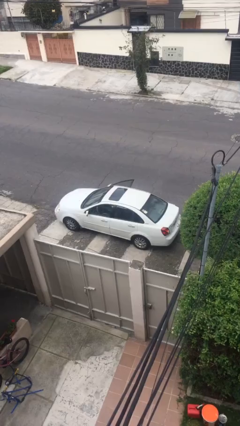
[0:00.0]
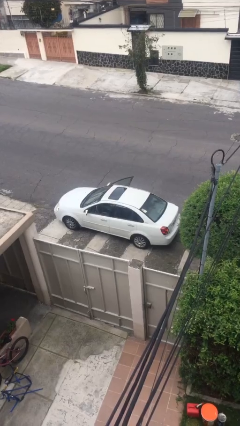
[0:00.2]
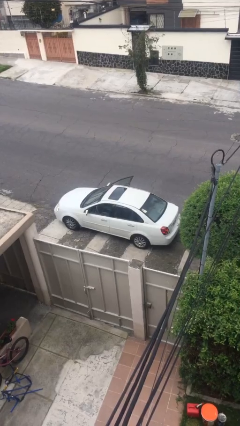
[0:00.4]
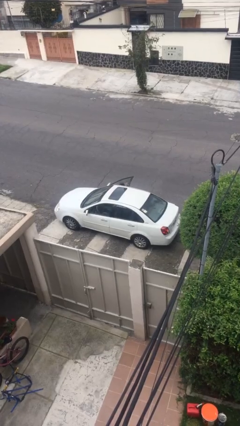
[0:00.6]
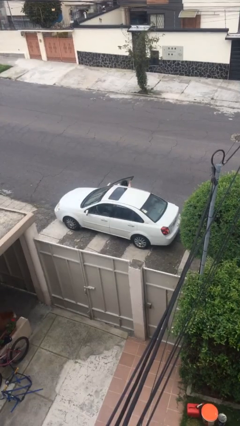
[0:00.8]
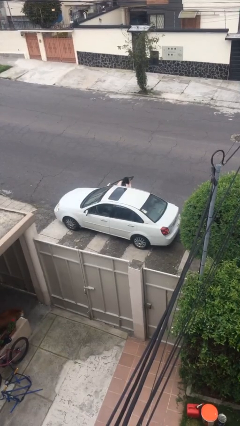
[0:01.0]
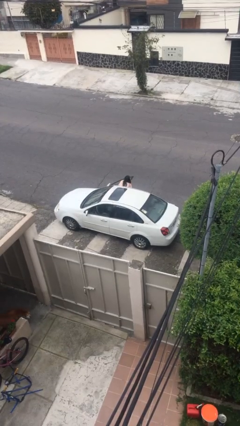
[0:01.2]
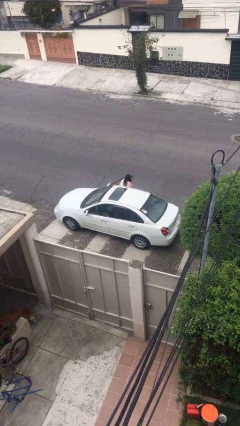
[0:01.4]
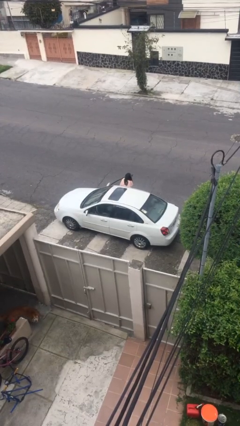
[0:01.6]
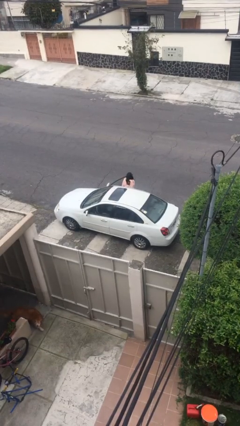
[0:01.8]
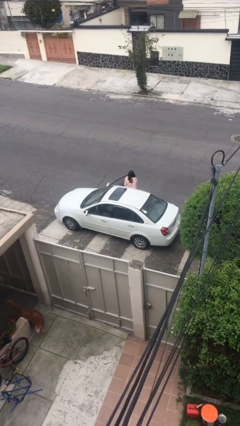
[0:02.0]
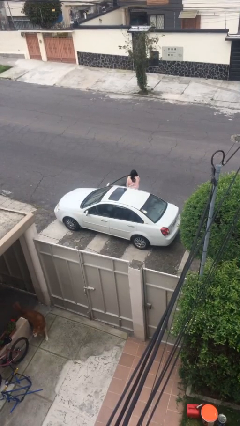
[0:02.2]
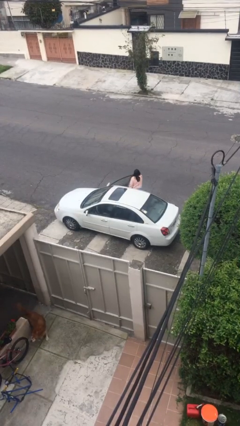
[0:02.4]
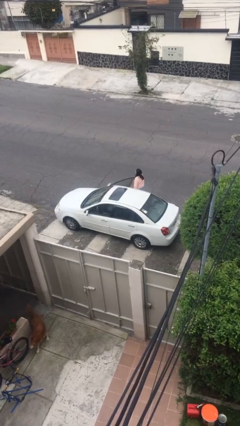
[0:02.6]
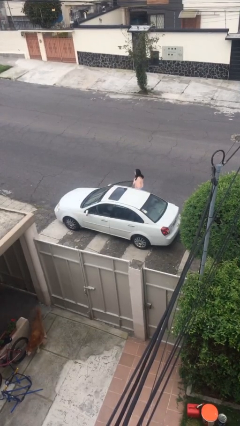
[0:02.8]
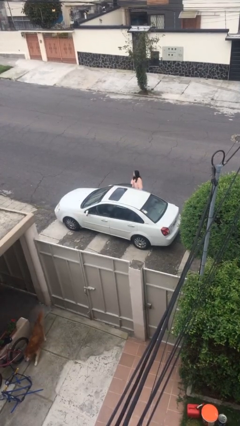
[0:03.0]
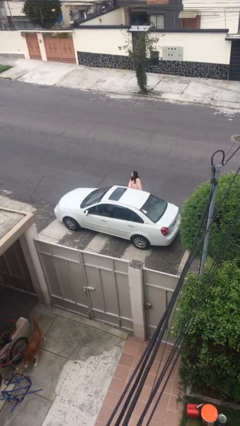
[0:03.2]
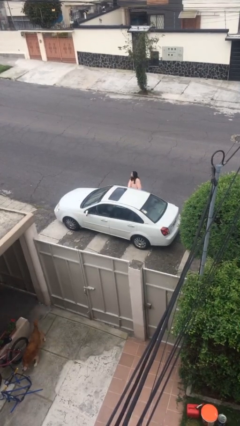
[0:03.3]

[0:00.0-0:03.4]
car drops off person

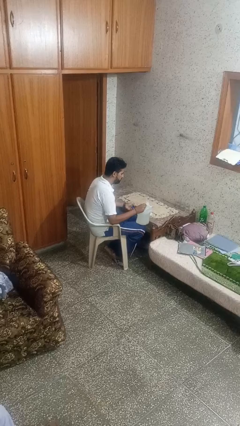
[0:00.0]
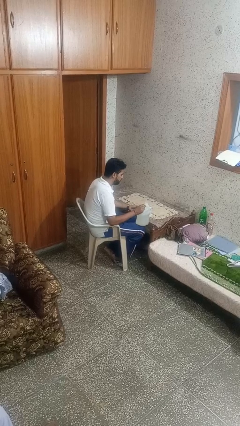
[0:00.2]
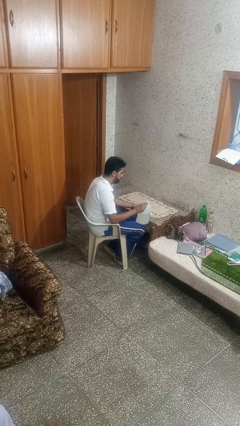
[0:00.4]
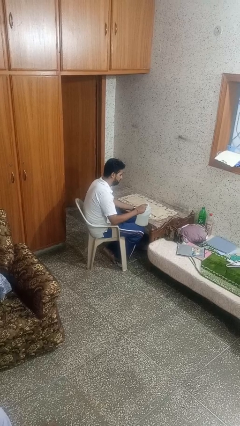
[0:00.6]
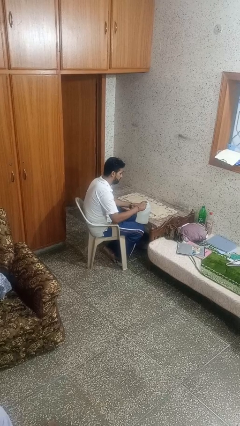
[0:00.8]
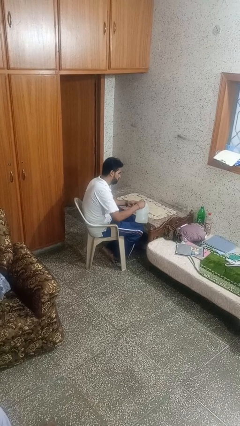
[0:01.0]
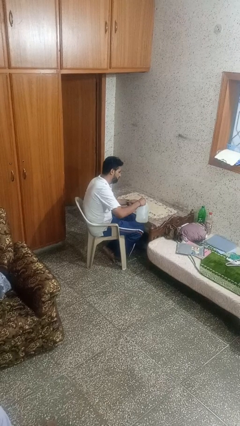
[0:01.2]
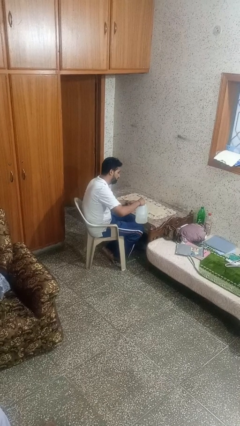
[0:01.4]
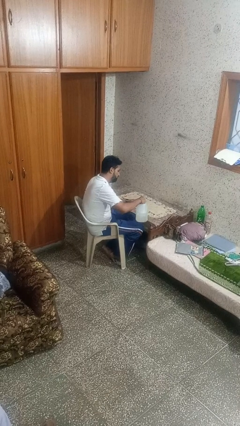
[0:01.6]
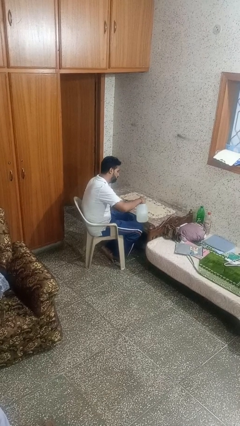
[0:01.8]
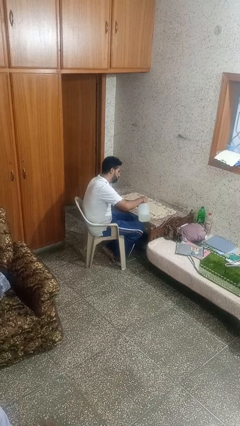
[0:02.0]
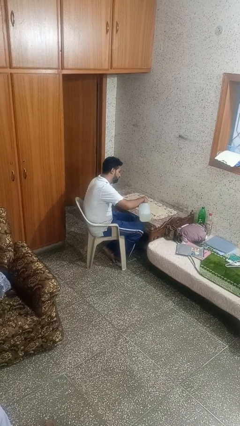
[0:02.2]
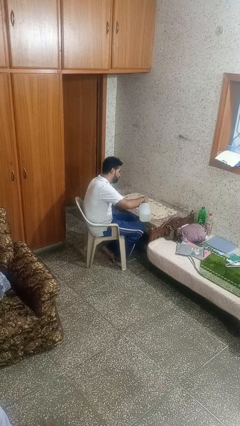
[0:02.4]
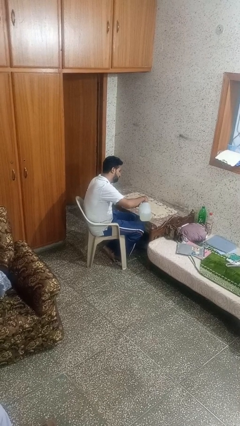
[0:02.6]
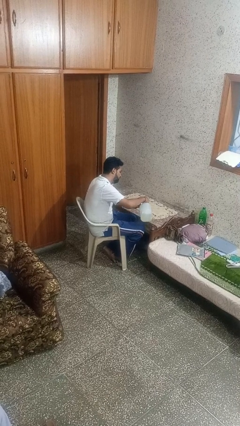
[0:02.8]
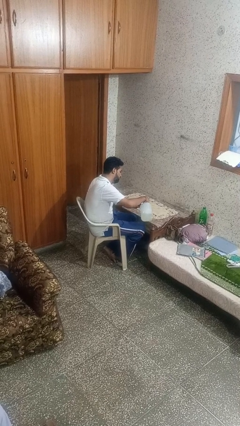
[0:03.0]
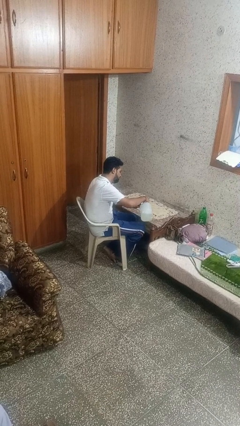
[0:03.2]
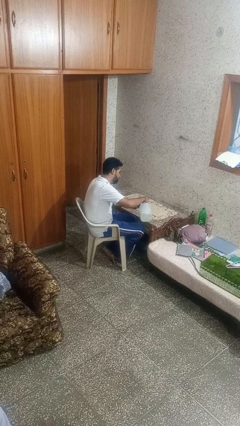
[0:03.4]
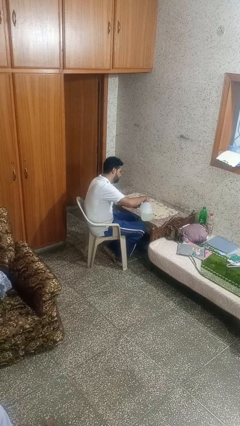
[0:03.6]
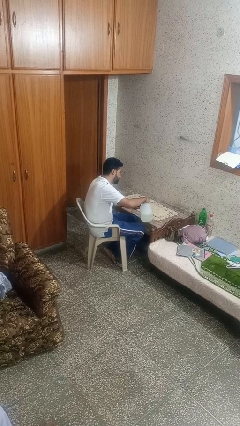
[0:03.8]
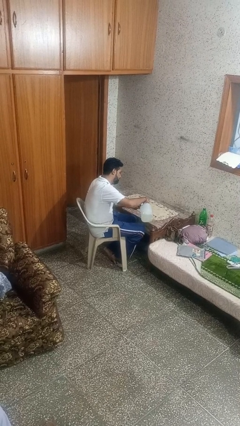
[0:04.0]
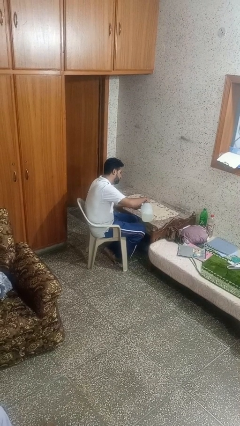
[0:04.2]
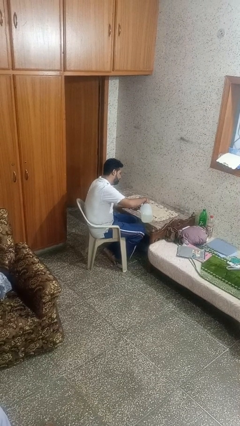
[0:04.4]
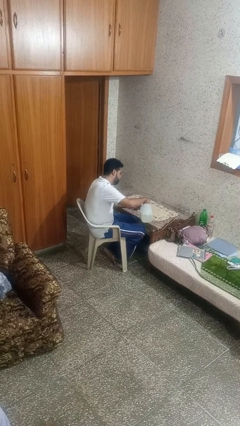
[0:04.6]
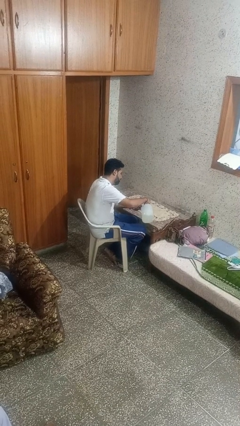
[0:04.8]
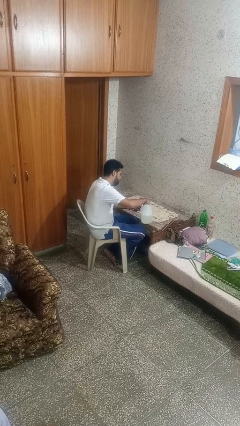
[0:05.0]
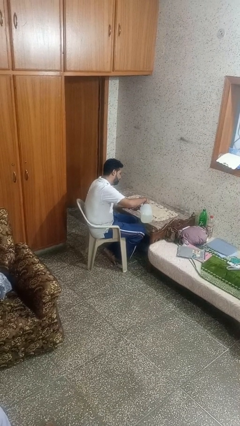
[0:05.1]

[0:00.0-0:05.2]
person pours liquid into cup

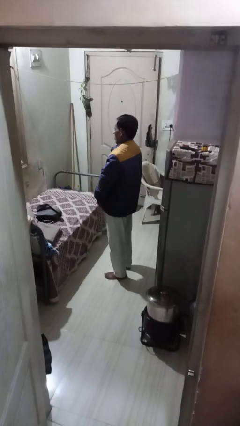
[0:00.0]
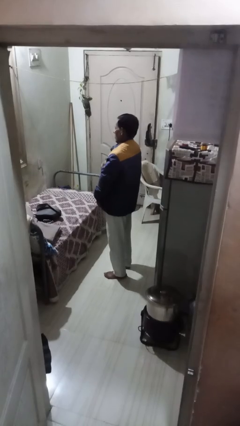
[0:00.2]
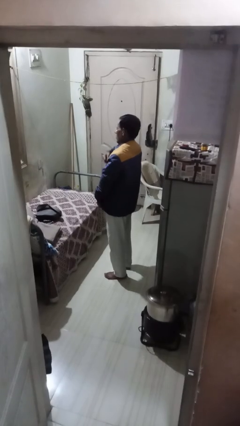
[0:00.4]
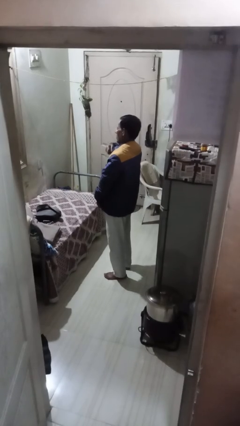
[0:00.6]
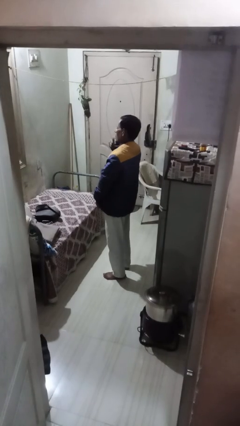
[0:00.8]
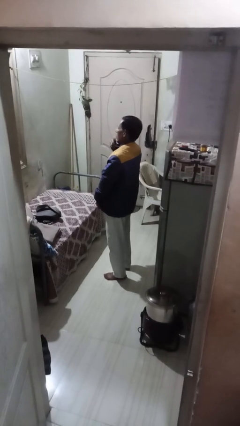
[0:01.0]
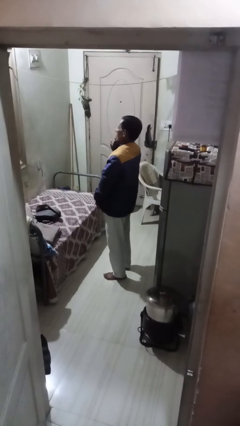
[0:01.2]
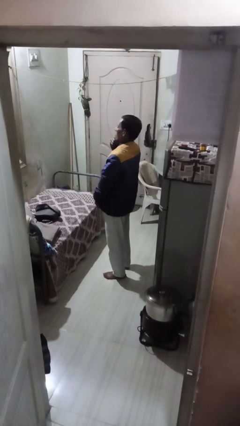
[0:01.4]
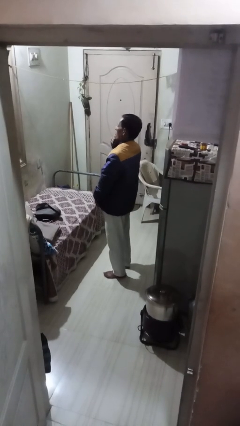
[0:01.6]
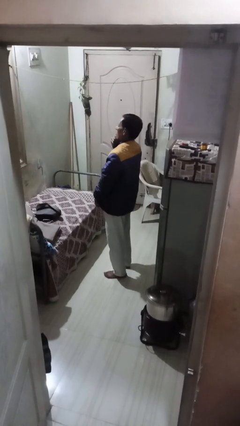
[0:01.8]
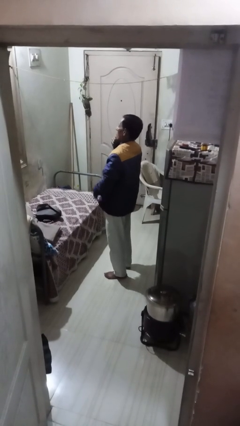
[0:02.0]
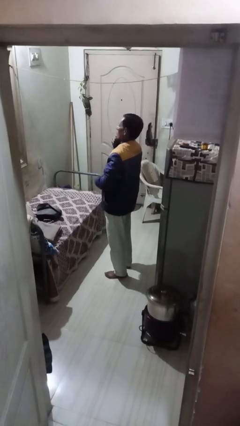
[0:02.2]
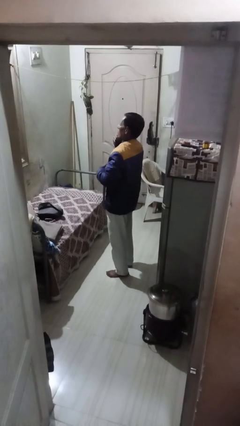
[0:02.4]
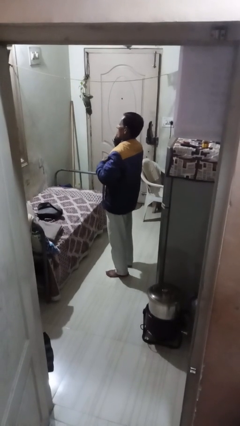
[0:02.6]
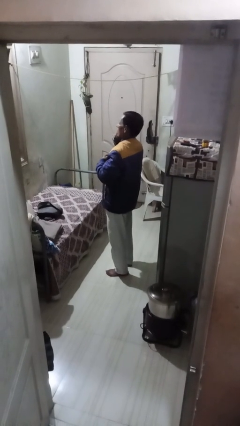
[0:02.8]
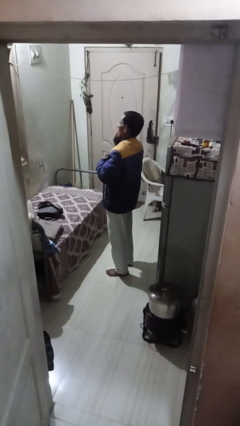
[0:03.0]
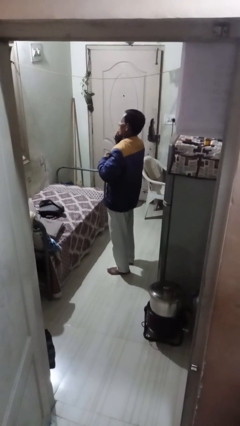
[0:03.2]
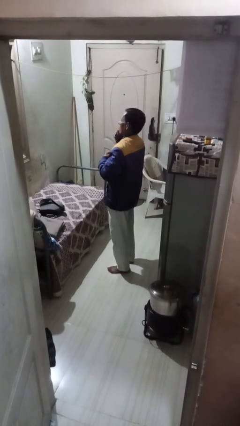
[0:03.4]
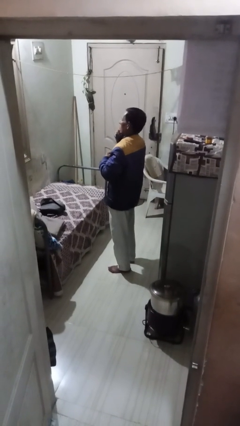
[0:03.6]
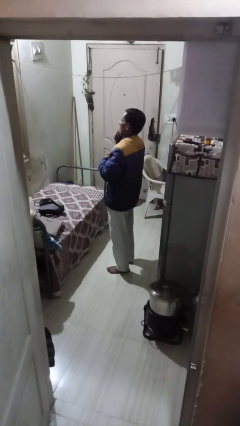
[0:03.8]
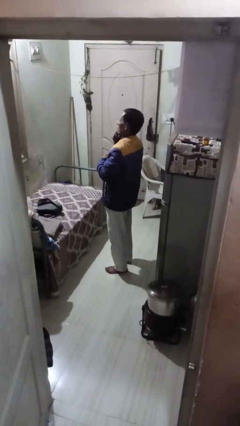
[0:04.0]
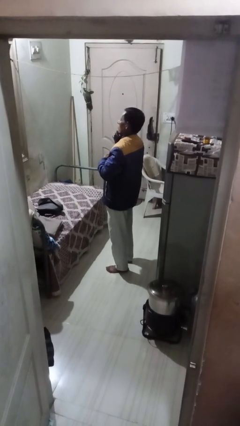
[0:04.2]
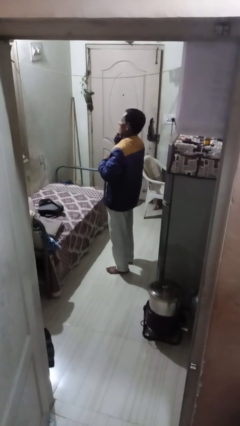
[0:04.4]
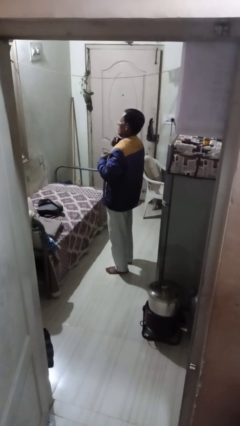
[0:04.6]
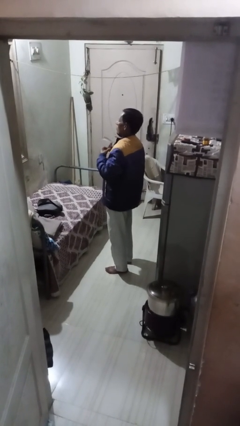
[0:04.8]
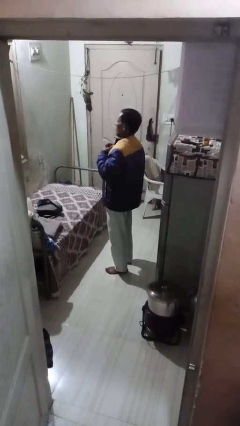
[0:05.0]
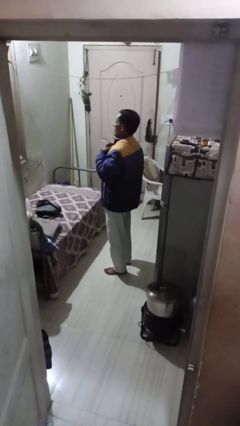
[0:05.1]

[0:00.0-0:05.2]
person zips up jacket

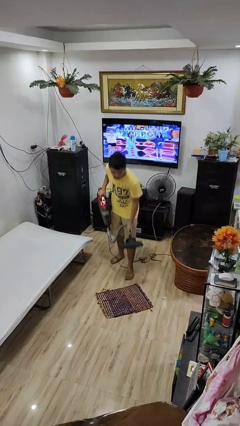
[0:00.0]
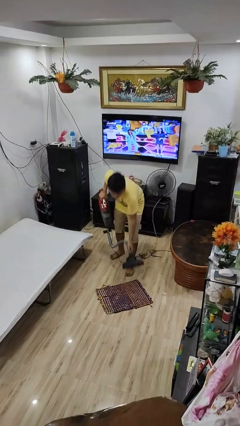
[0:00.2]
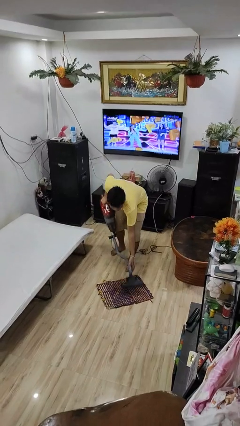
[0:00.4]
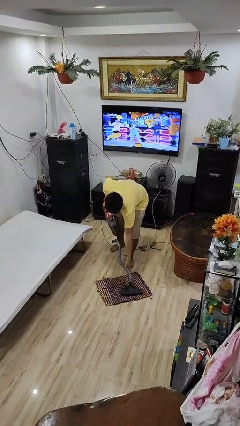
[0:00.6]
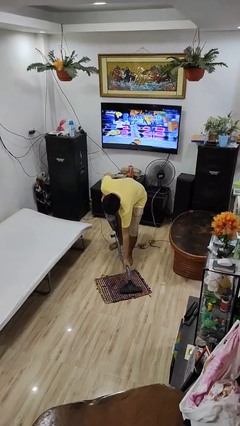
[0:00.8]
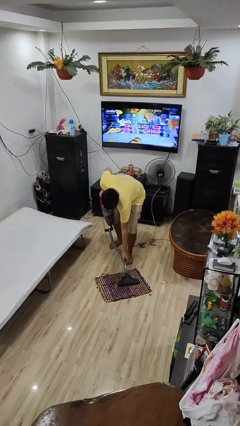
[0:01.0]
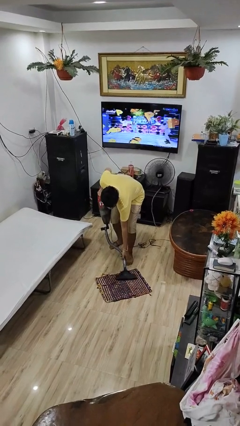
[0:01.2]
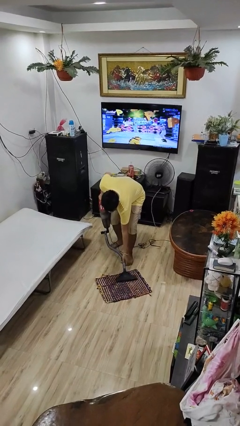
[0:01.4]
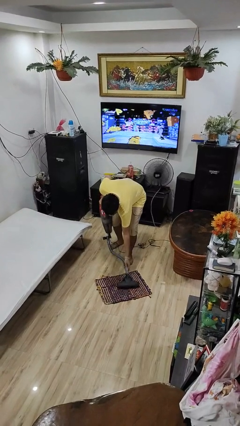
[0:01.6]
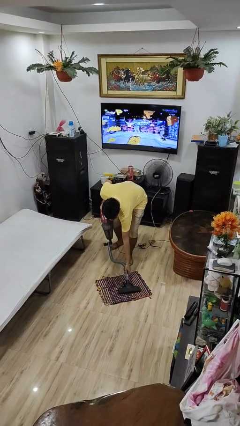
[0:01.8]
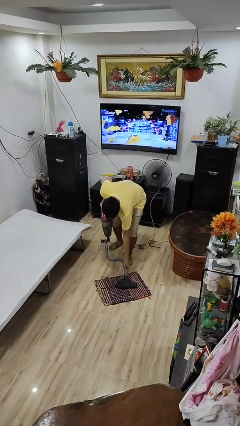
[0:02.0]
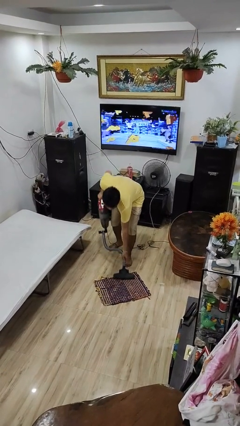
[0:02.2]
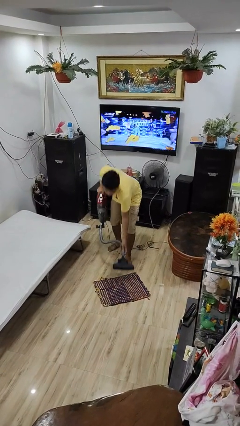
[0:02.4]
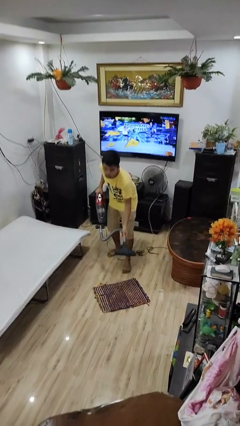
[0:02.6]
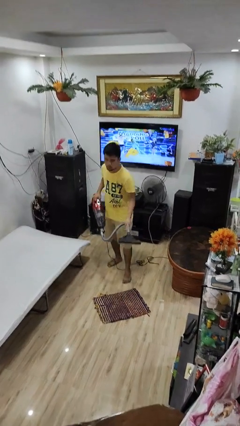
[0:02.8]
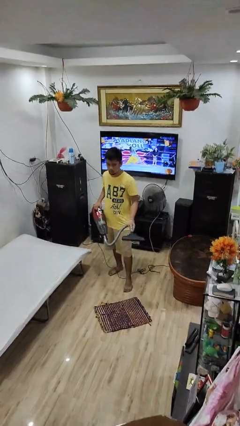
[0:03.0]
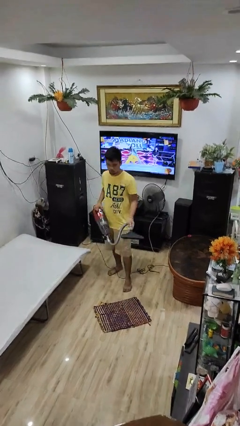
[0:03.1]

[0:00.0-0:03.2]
person vacuums carpet

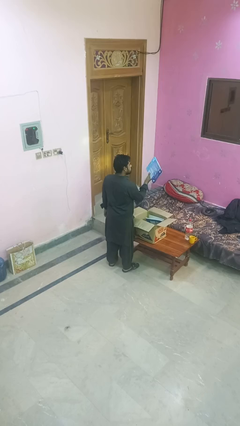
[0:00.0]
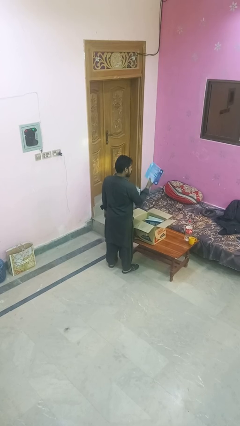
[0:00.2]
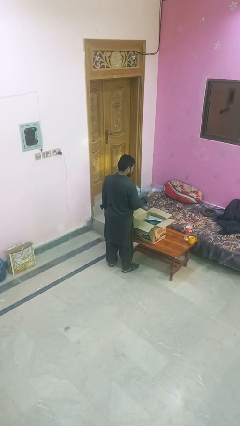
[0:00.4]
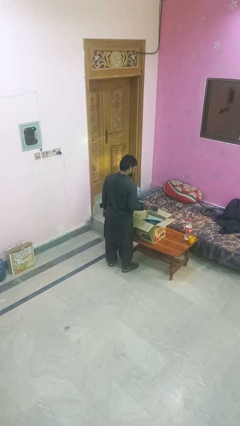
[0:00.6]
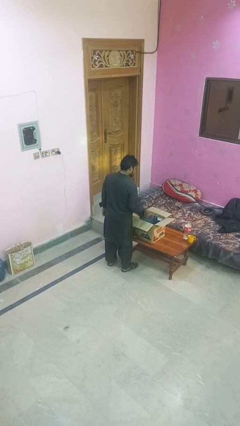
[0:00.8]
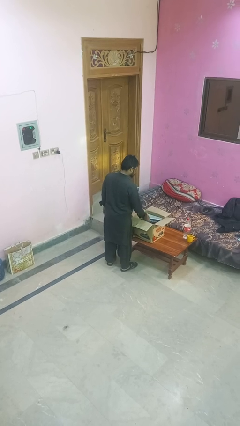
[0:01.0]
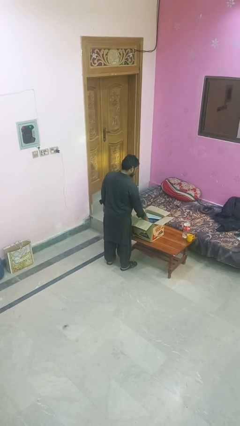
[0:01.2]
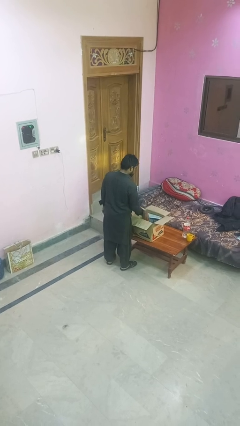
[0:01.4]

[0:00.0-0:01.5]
person puts object into box
